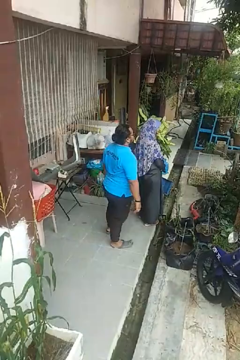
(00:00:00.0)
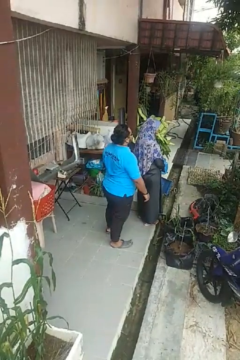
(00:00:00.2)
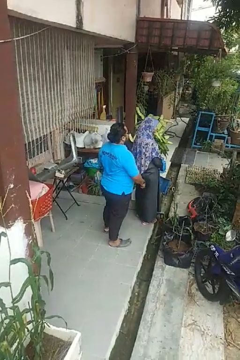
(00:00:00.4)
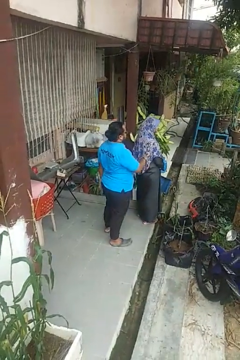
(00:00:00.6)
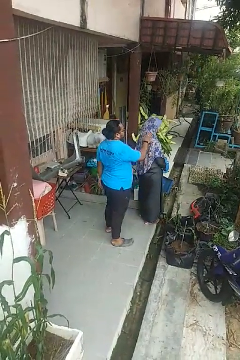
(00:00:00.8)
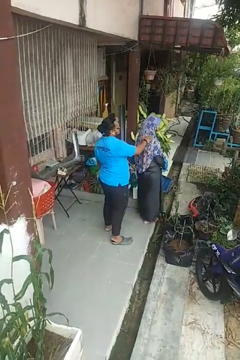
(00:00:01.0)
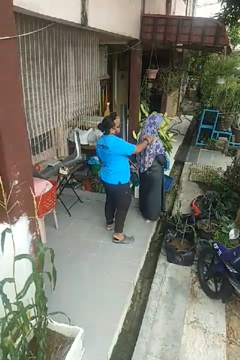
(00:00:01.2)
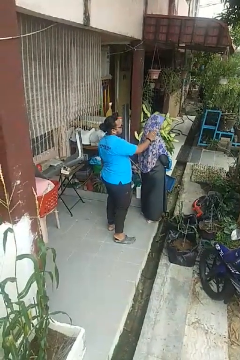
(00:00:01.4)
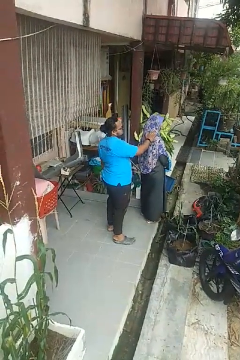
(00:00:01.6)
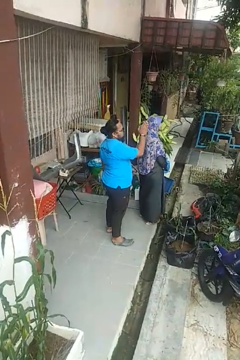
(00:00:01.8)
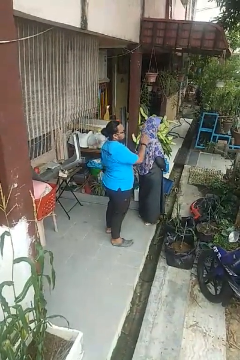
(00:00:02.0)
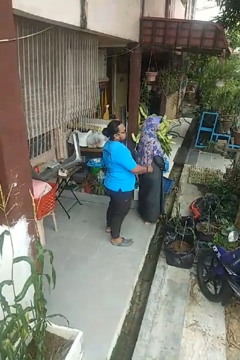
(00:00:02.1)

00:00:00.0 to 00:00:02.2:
person touches back of person

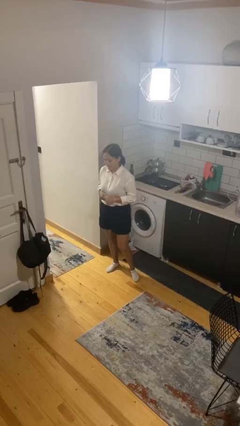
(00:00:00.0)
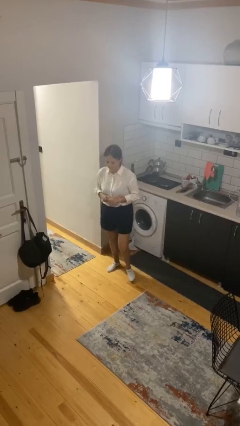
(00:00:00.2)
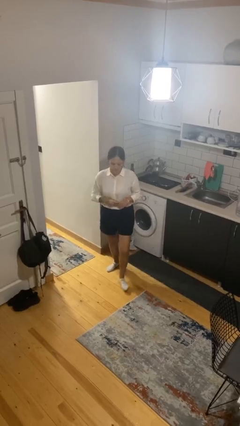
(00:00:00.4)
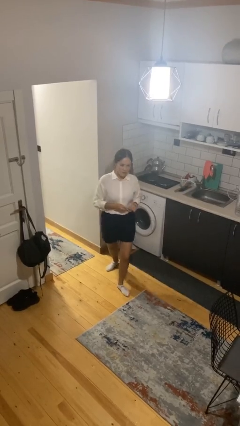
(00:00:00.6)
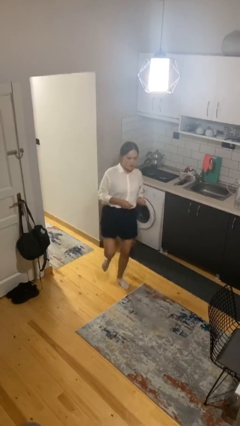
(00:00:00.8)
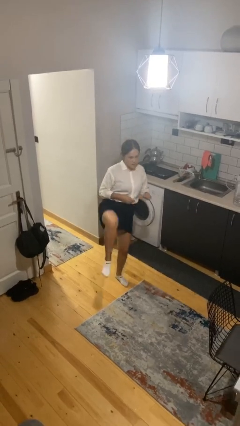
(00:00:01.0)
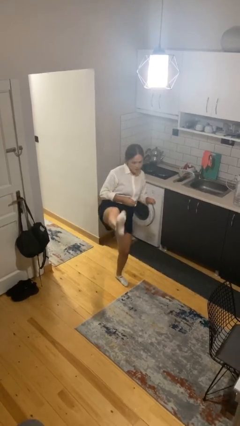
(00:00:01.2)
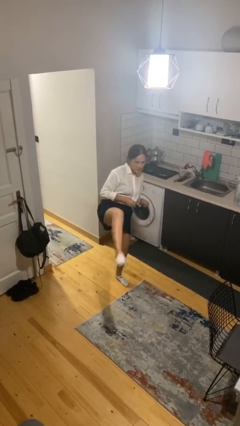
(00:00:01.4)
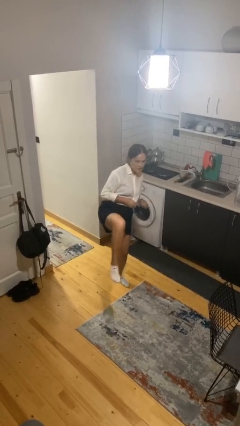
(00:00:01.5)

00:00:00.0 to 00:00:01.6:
person karate kicks

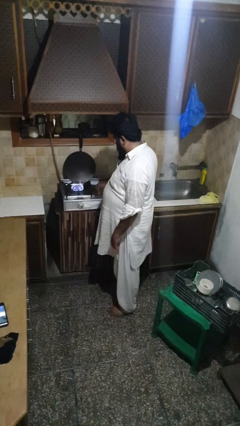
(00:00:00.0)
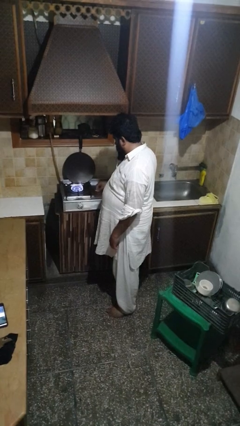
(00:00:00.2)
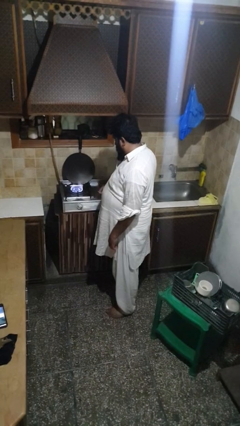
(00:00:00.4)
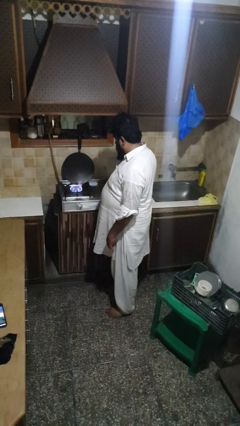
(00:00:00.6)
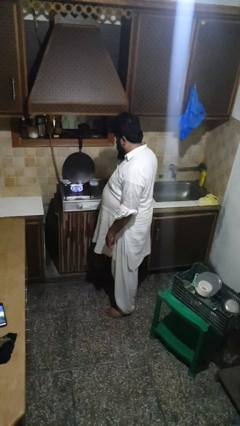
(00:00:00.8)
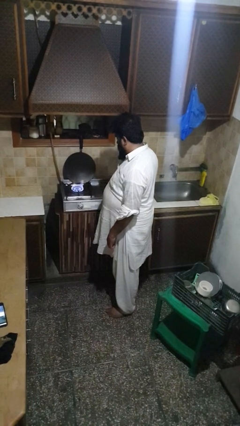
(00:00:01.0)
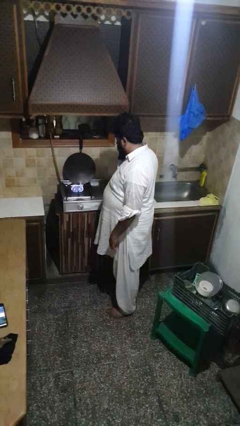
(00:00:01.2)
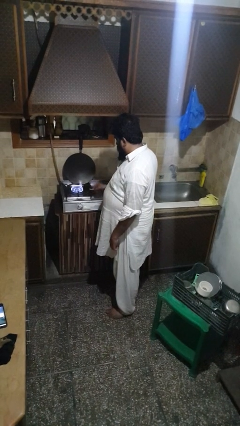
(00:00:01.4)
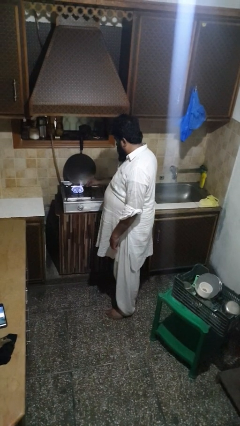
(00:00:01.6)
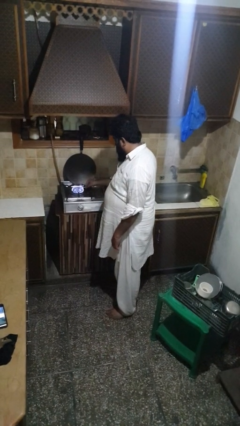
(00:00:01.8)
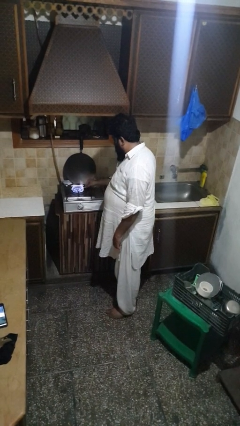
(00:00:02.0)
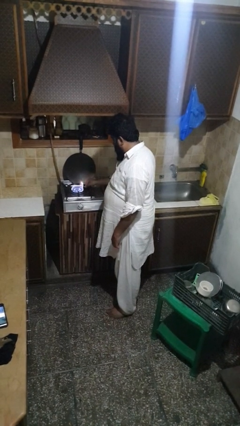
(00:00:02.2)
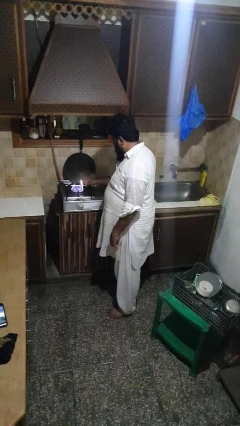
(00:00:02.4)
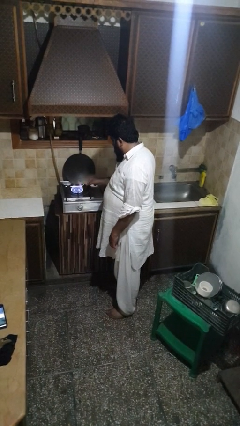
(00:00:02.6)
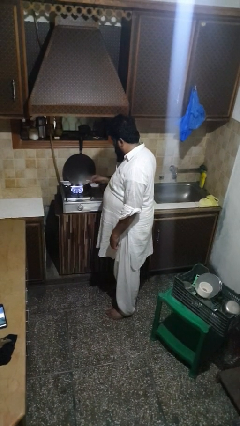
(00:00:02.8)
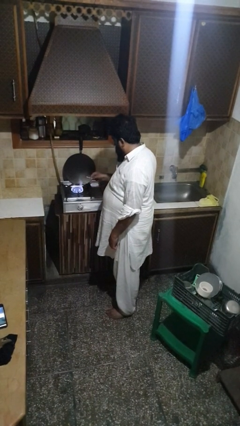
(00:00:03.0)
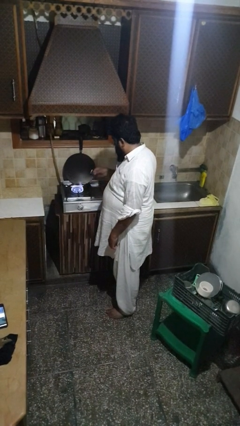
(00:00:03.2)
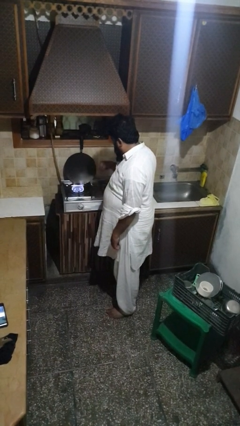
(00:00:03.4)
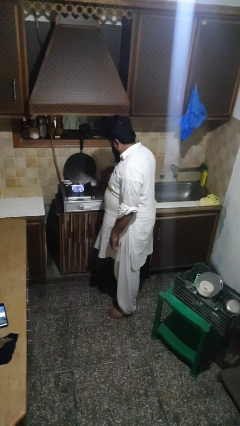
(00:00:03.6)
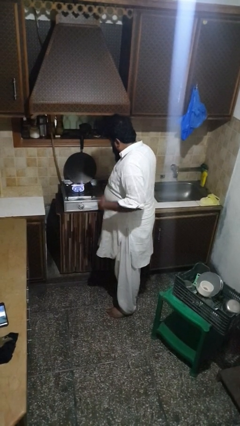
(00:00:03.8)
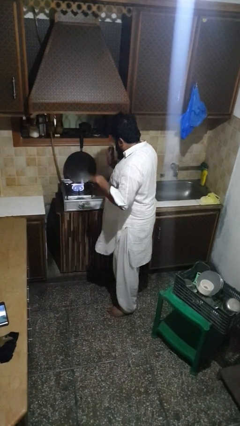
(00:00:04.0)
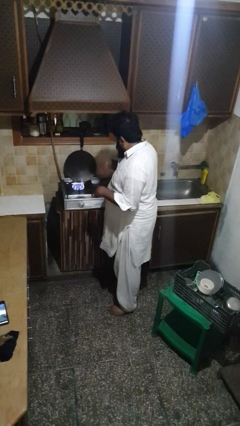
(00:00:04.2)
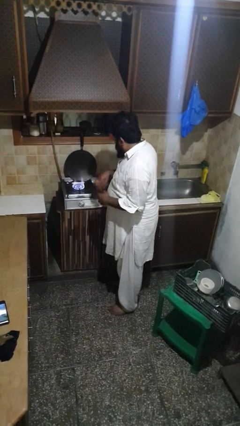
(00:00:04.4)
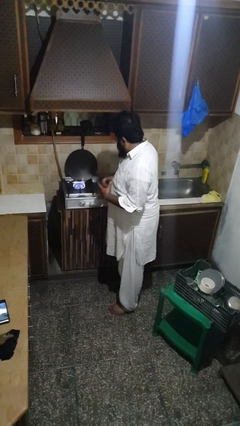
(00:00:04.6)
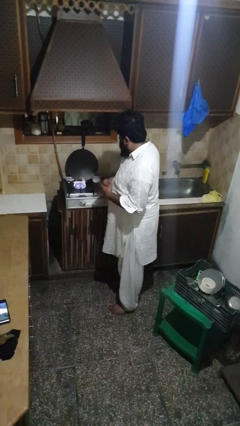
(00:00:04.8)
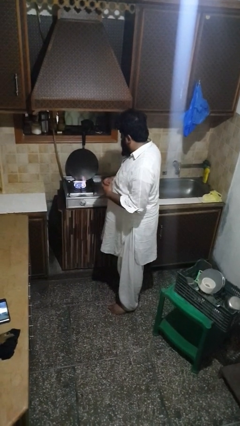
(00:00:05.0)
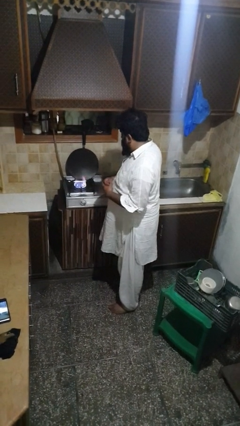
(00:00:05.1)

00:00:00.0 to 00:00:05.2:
person burns hand

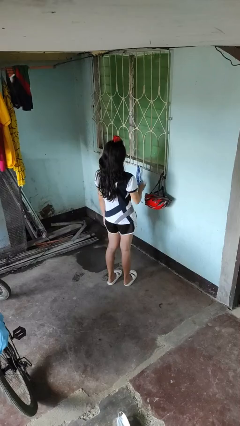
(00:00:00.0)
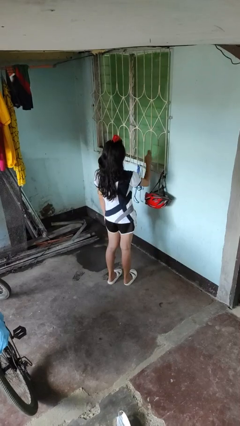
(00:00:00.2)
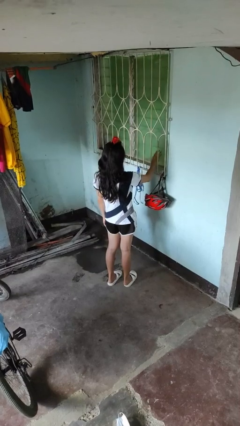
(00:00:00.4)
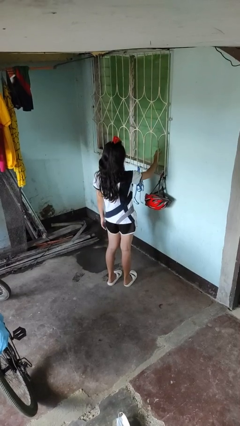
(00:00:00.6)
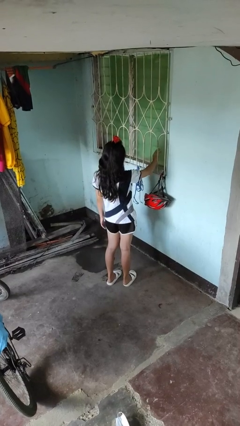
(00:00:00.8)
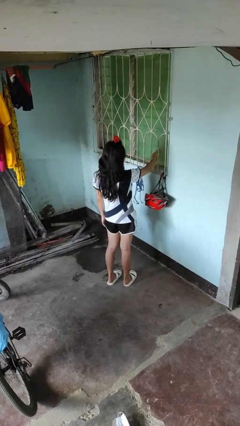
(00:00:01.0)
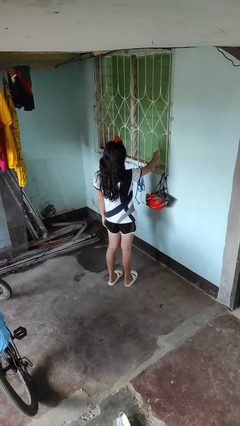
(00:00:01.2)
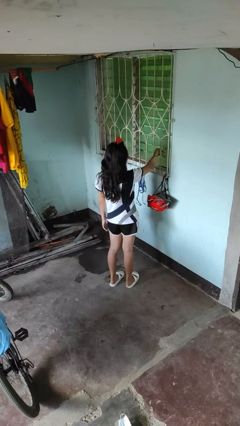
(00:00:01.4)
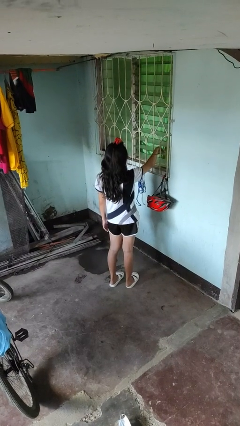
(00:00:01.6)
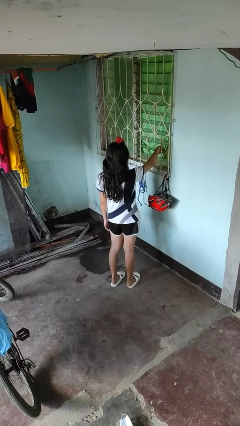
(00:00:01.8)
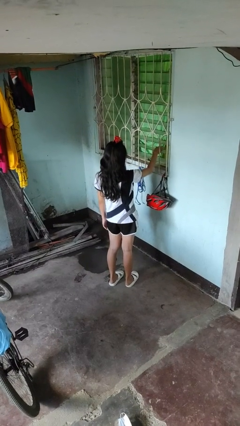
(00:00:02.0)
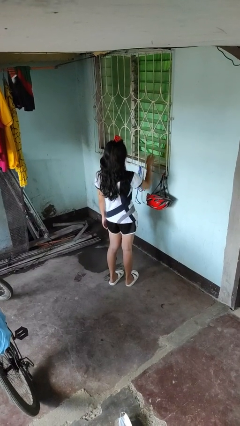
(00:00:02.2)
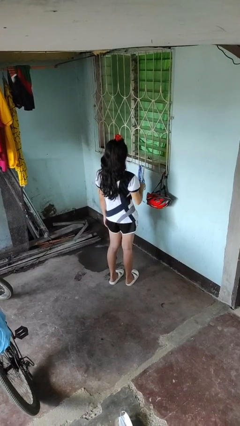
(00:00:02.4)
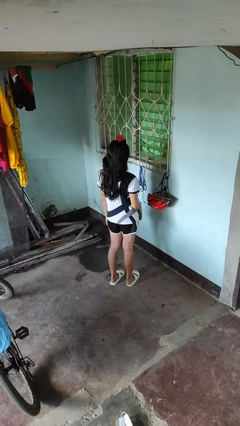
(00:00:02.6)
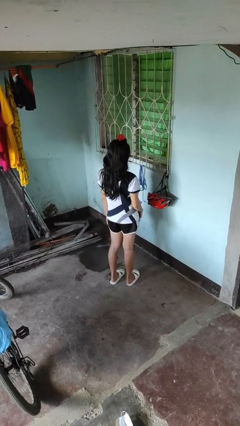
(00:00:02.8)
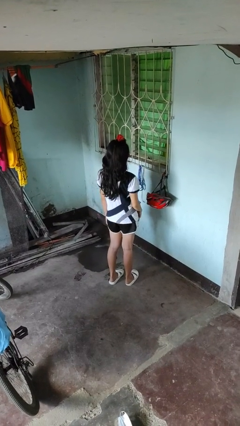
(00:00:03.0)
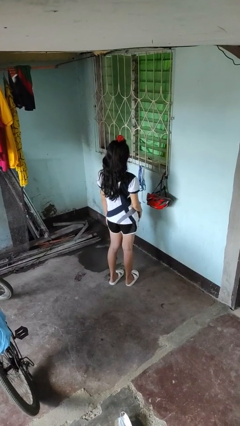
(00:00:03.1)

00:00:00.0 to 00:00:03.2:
person opens home window

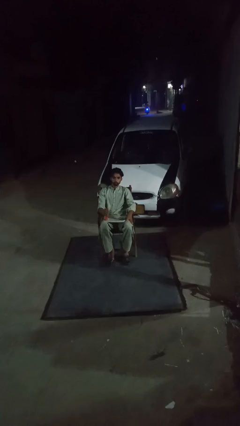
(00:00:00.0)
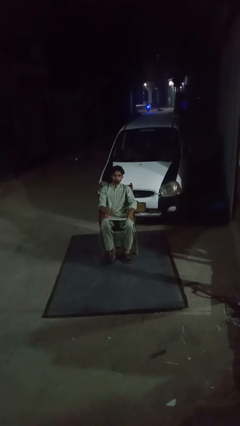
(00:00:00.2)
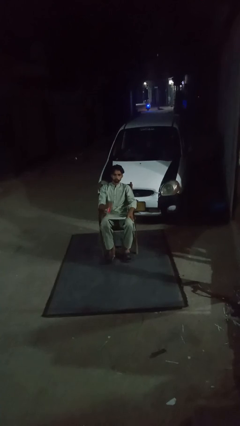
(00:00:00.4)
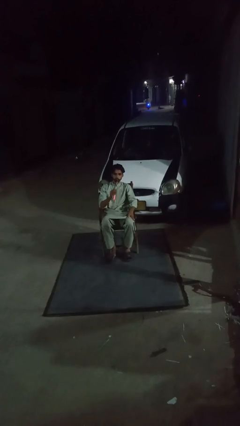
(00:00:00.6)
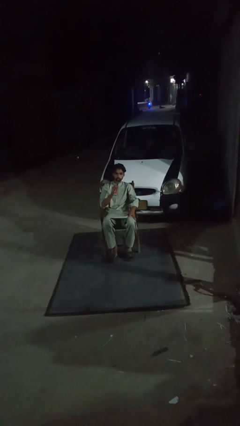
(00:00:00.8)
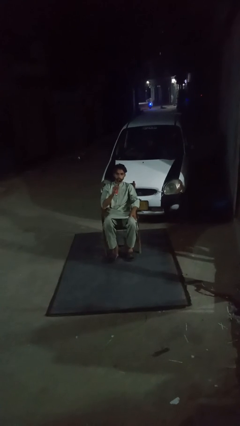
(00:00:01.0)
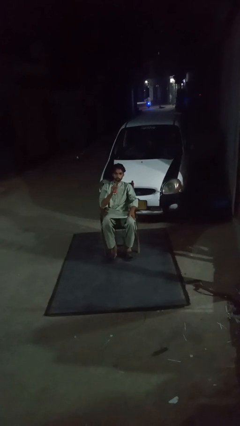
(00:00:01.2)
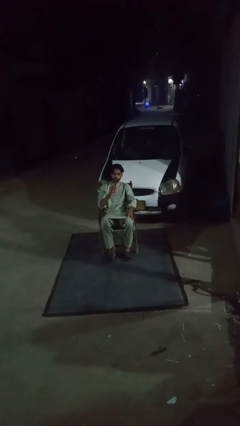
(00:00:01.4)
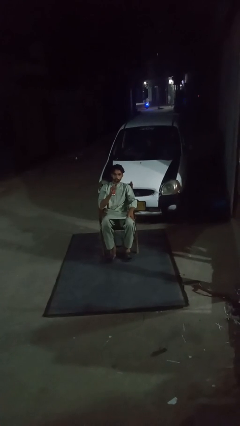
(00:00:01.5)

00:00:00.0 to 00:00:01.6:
person drinks from straw

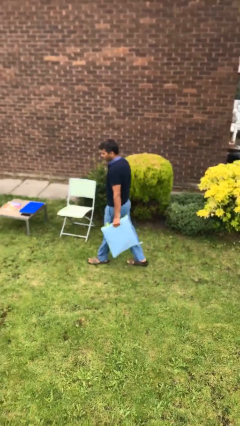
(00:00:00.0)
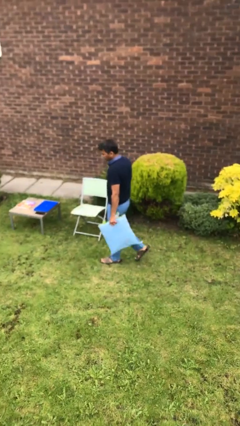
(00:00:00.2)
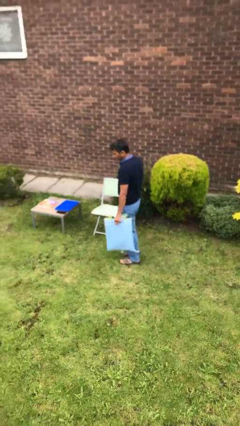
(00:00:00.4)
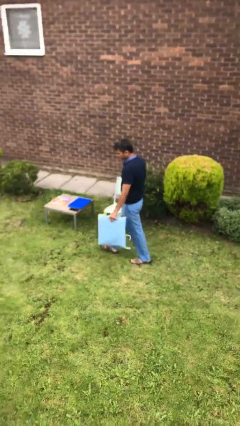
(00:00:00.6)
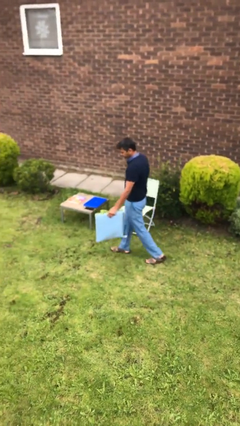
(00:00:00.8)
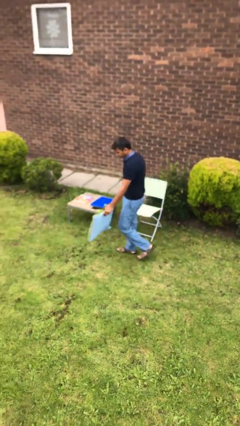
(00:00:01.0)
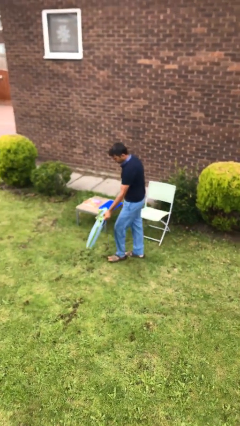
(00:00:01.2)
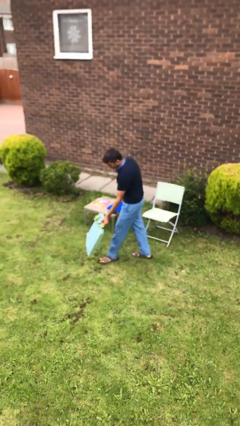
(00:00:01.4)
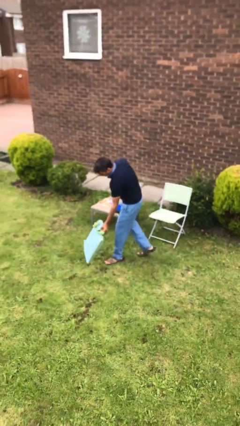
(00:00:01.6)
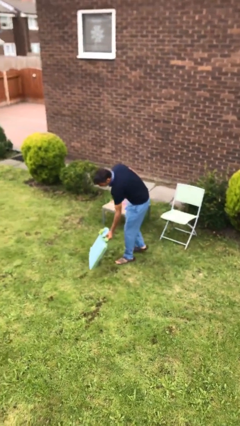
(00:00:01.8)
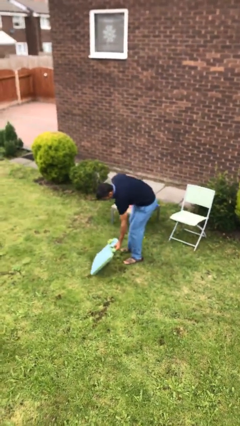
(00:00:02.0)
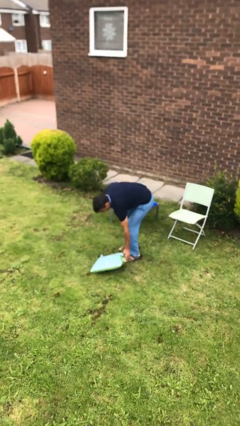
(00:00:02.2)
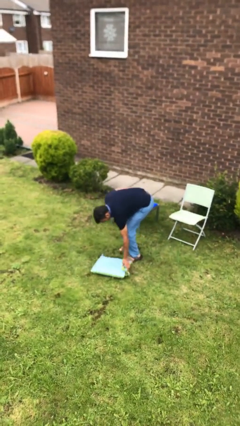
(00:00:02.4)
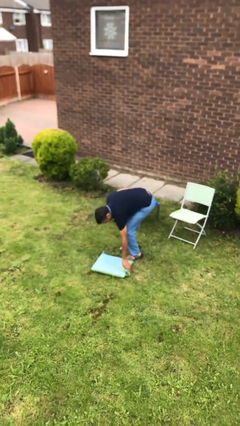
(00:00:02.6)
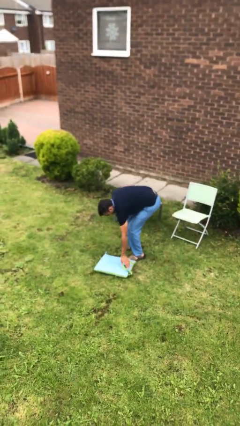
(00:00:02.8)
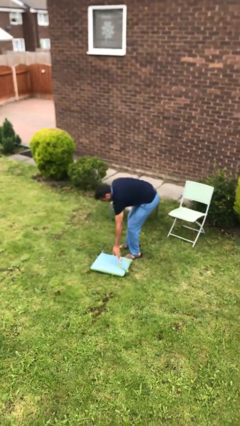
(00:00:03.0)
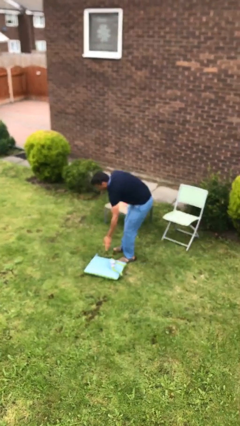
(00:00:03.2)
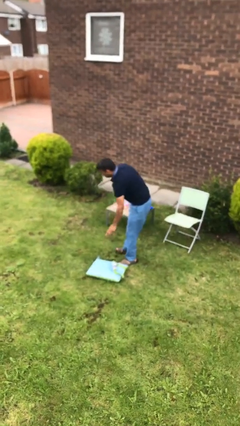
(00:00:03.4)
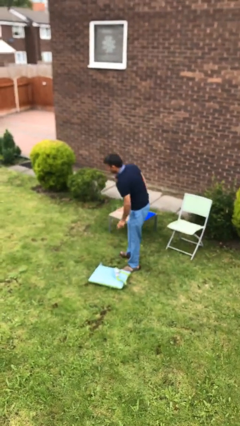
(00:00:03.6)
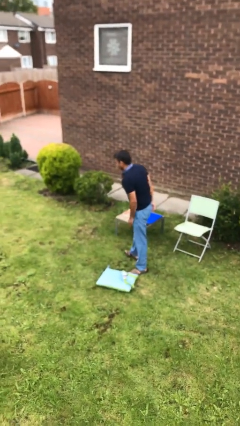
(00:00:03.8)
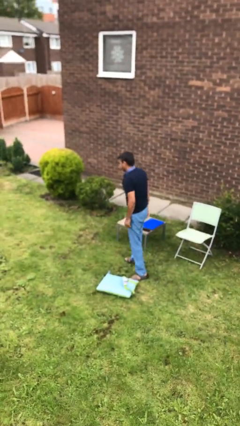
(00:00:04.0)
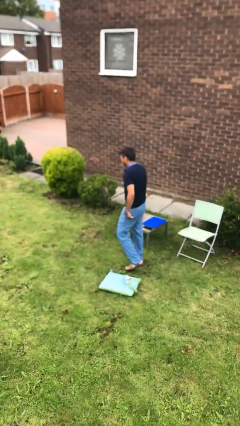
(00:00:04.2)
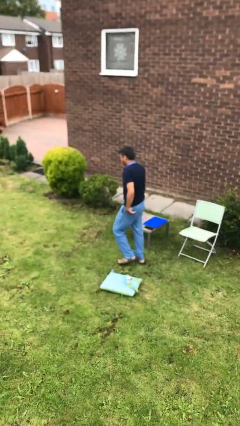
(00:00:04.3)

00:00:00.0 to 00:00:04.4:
person puts down object on floor
